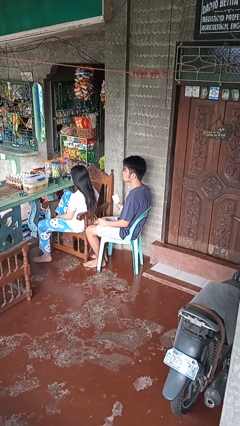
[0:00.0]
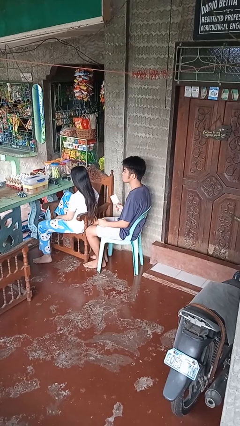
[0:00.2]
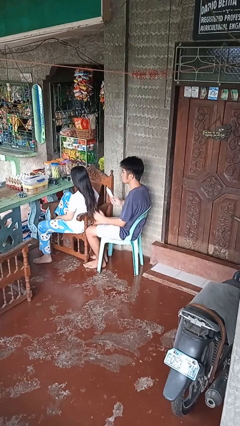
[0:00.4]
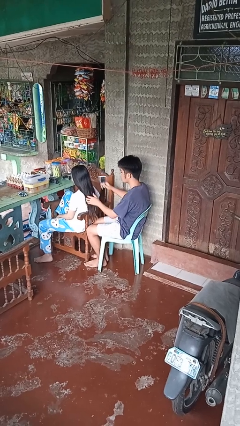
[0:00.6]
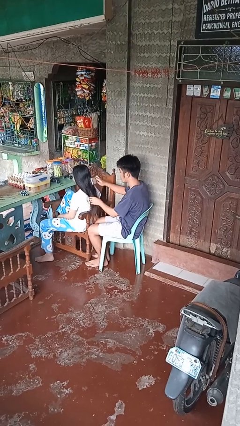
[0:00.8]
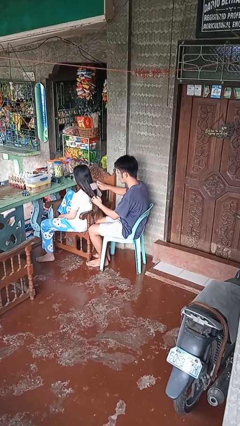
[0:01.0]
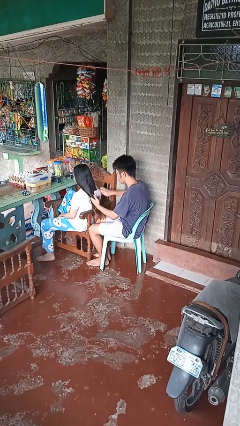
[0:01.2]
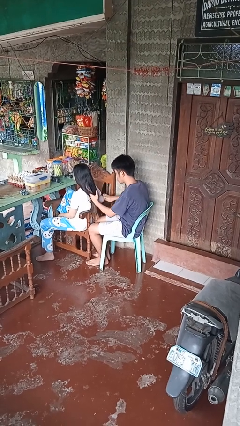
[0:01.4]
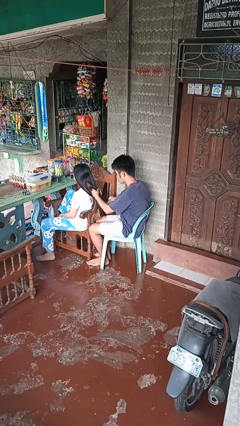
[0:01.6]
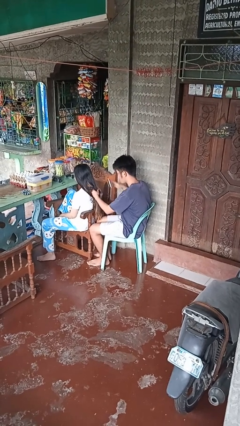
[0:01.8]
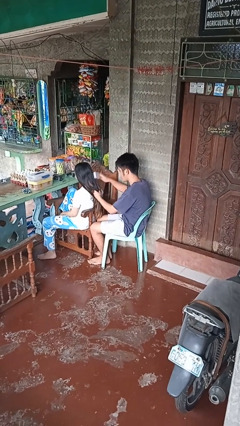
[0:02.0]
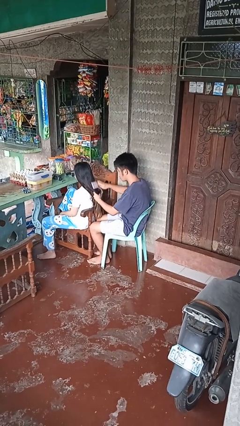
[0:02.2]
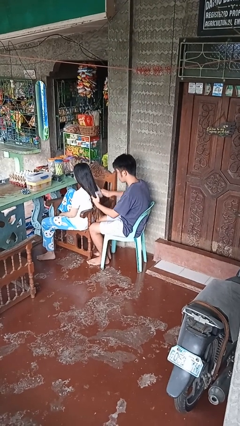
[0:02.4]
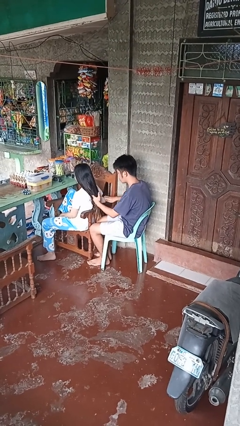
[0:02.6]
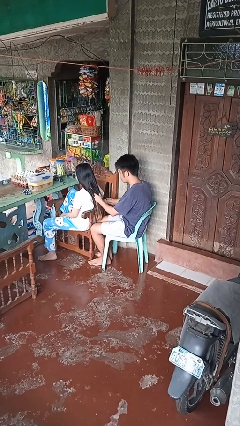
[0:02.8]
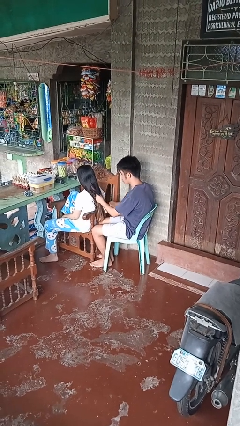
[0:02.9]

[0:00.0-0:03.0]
person brushes hair of person

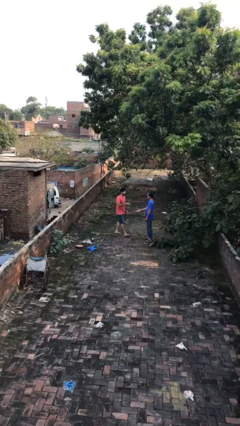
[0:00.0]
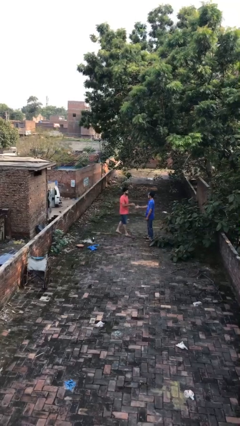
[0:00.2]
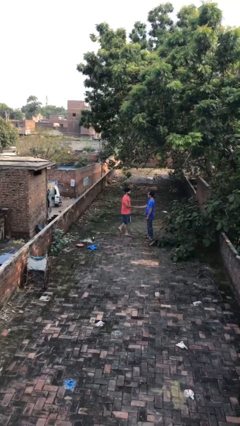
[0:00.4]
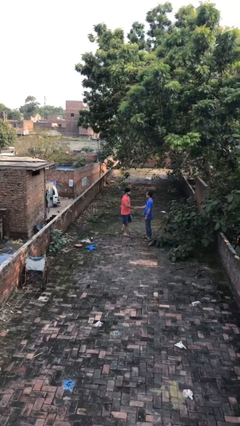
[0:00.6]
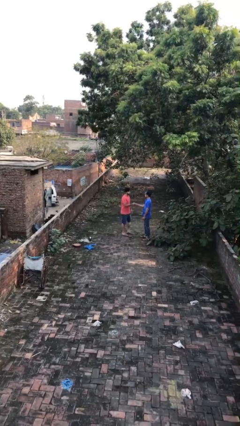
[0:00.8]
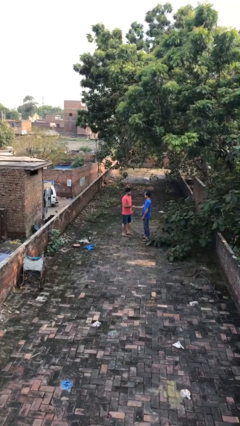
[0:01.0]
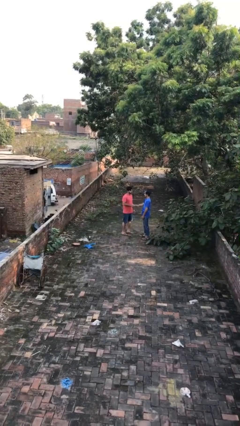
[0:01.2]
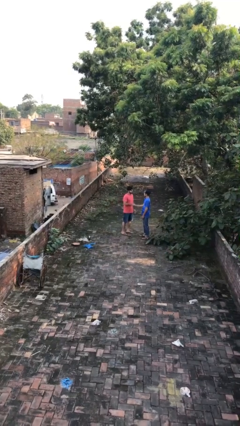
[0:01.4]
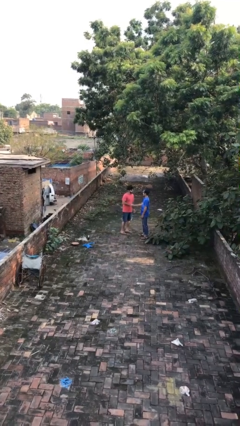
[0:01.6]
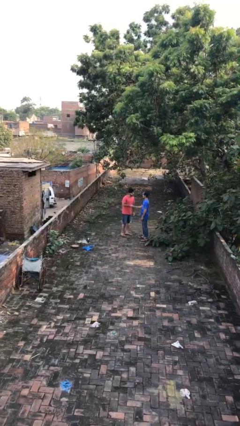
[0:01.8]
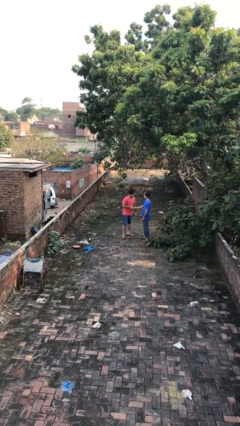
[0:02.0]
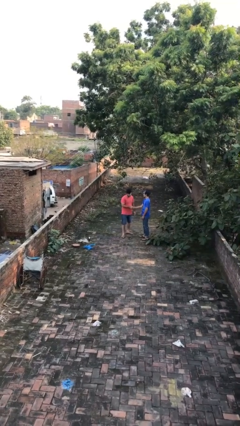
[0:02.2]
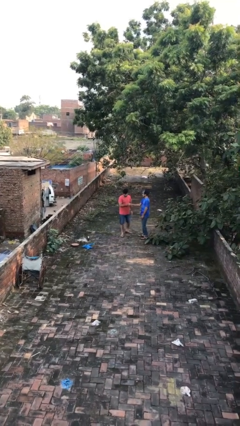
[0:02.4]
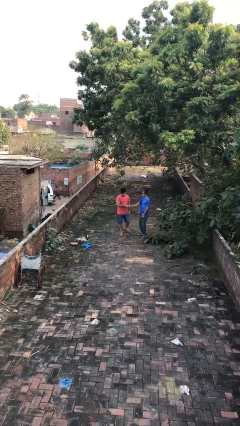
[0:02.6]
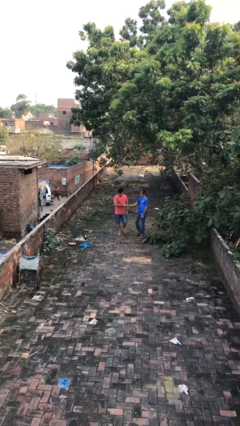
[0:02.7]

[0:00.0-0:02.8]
person shakes hand

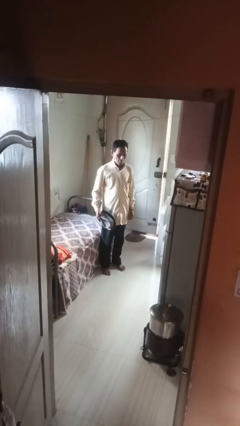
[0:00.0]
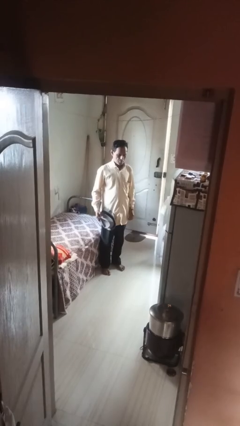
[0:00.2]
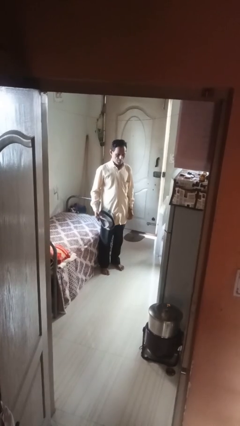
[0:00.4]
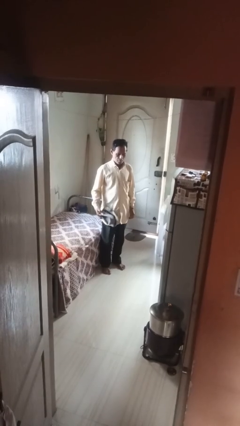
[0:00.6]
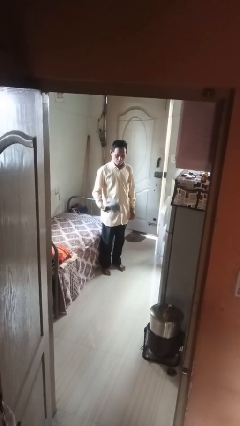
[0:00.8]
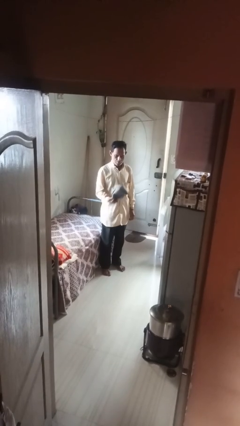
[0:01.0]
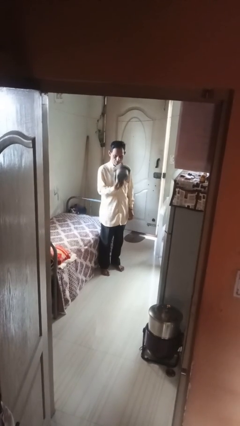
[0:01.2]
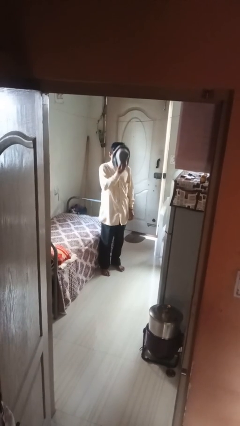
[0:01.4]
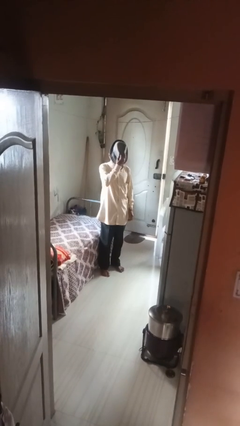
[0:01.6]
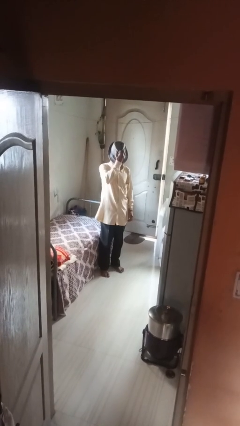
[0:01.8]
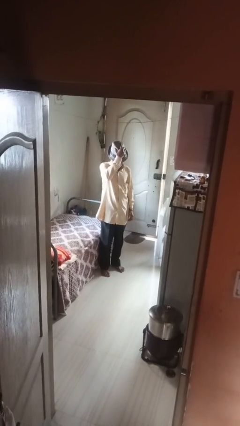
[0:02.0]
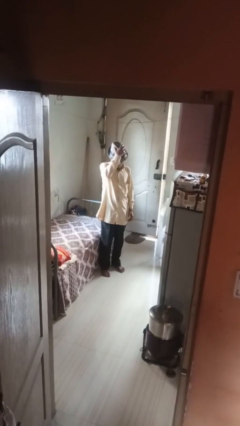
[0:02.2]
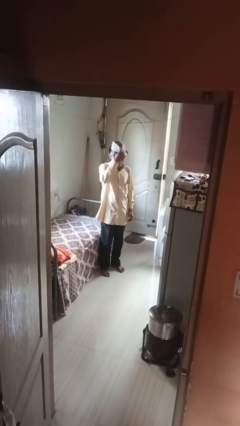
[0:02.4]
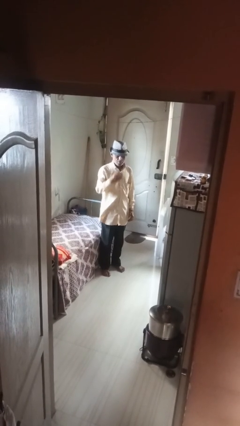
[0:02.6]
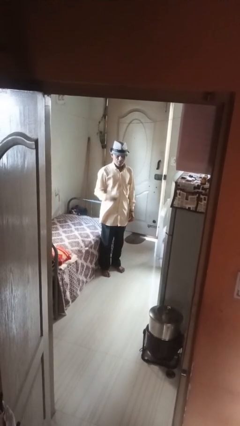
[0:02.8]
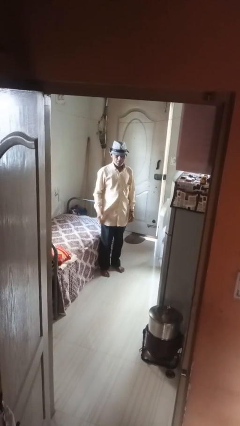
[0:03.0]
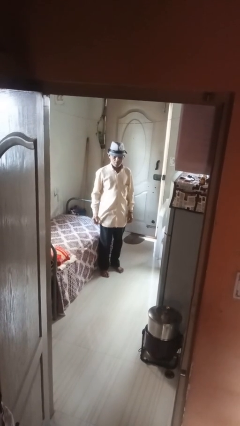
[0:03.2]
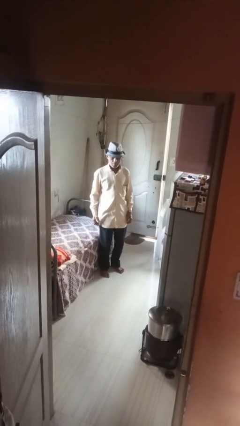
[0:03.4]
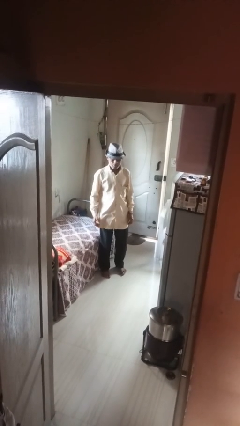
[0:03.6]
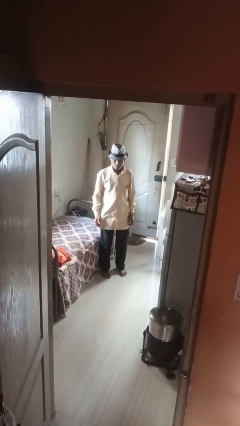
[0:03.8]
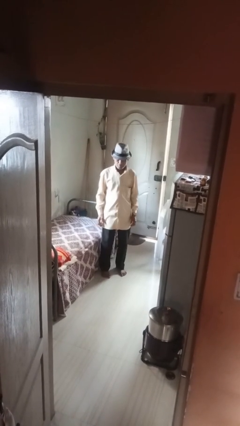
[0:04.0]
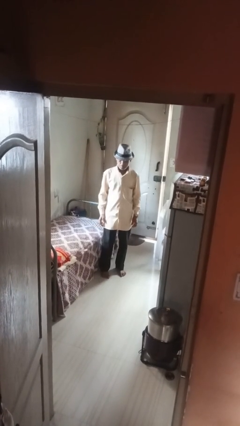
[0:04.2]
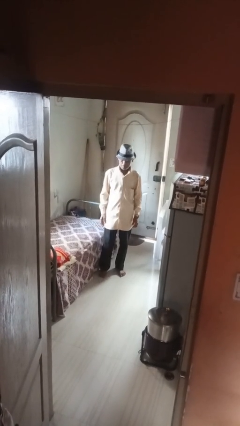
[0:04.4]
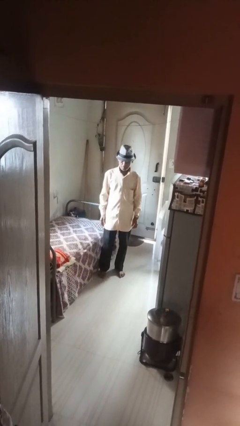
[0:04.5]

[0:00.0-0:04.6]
person puts on hat

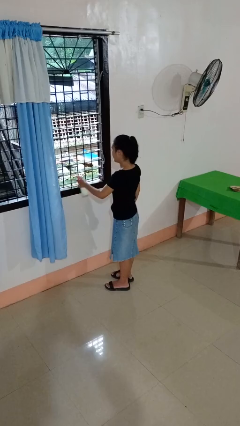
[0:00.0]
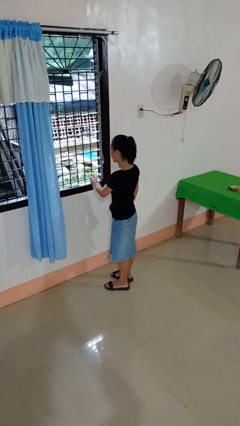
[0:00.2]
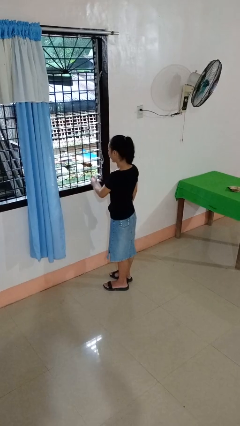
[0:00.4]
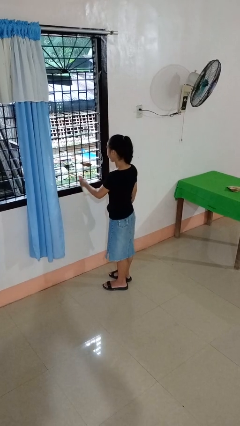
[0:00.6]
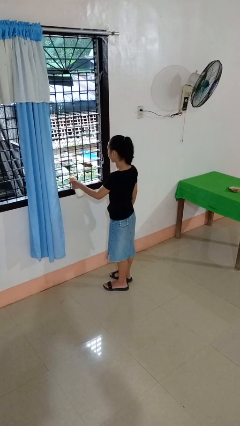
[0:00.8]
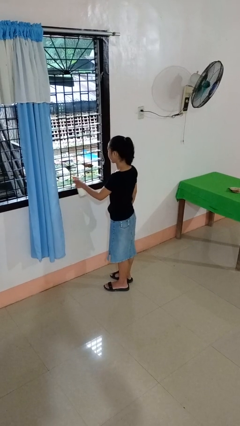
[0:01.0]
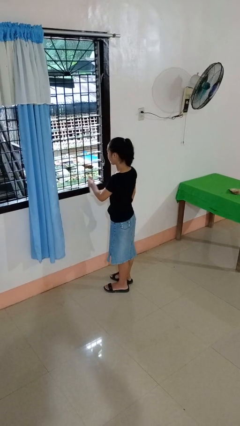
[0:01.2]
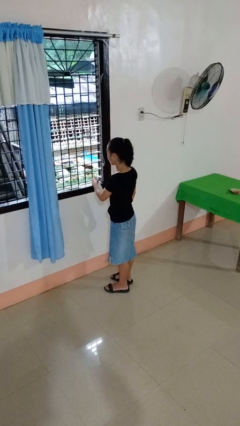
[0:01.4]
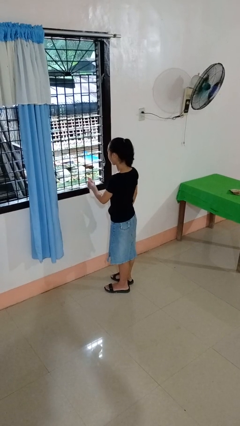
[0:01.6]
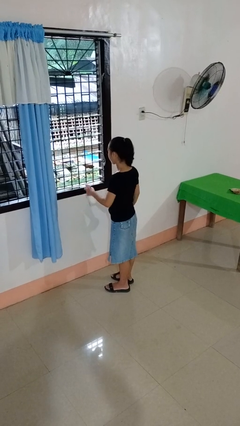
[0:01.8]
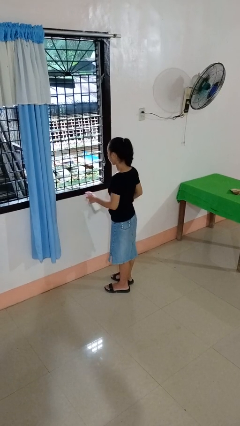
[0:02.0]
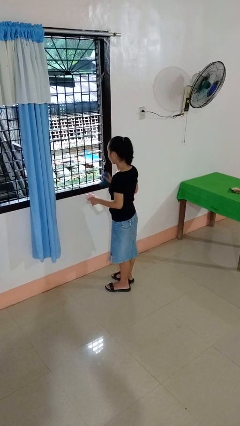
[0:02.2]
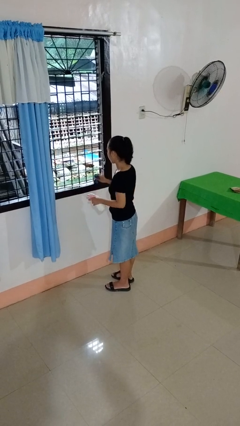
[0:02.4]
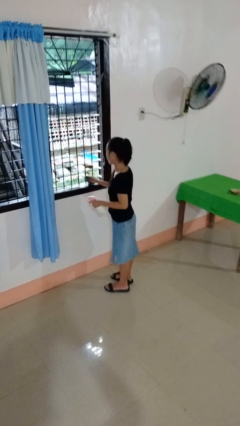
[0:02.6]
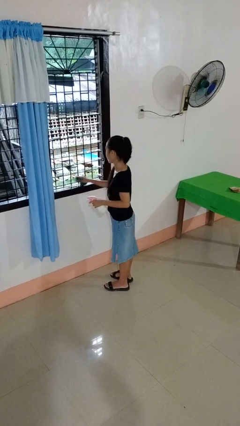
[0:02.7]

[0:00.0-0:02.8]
person sprays from bottle

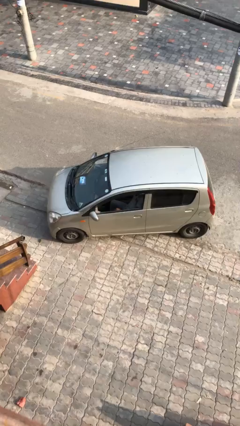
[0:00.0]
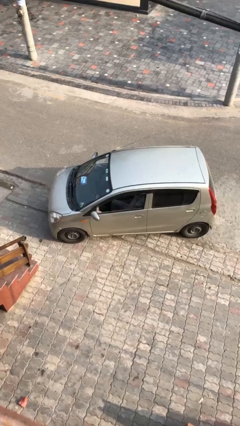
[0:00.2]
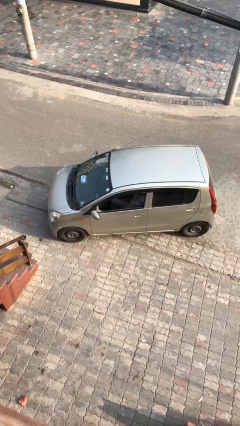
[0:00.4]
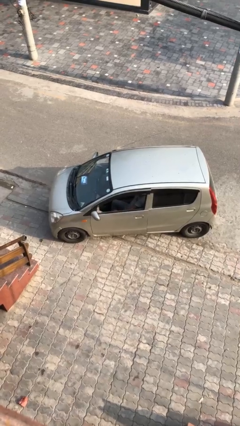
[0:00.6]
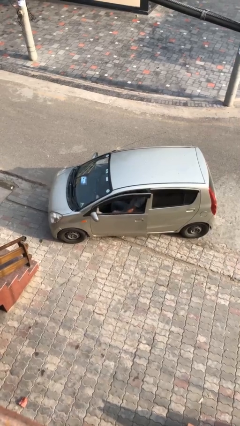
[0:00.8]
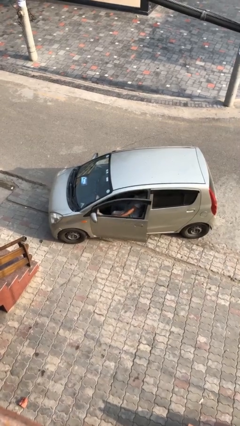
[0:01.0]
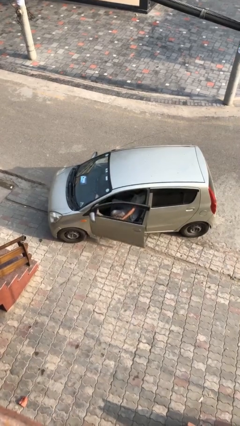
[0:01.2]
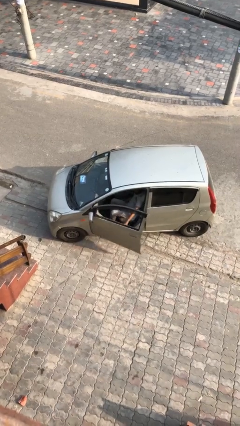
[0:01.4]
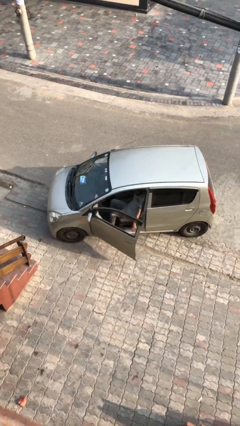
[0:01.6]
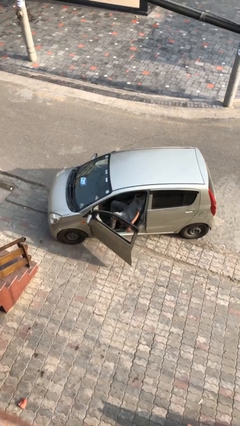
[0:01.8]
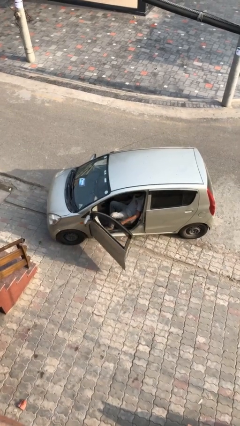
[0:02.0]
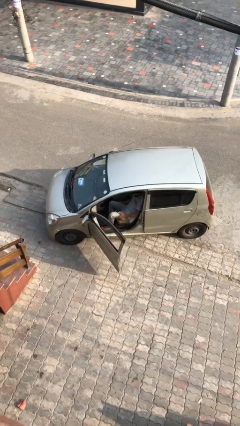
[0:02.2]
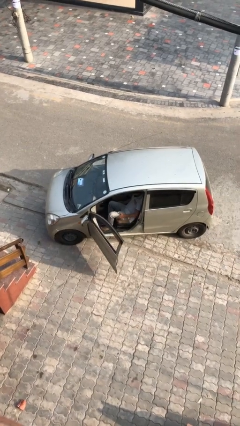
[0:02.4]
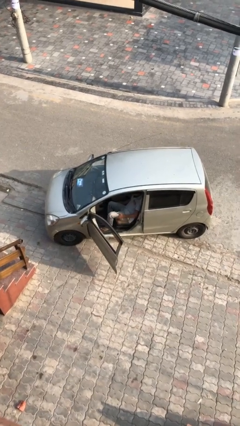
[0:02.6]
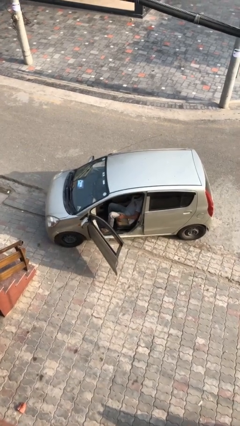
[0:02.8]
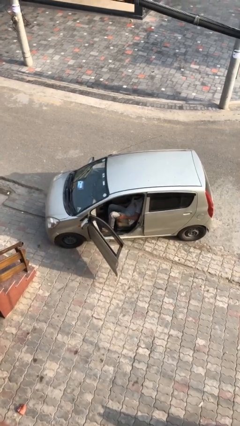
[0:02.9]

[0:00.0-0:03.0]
person opens car door

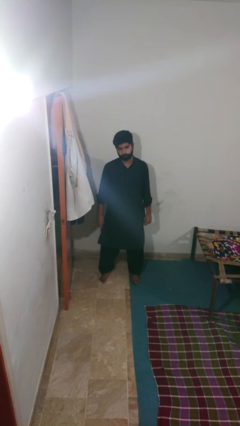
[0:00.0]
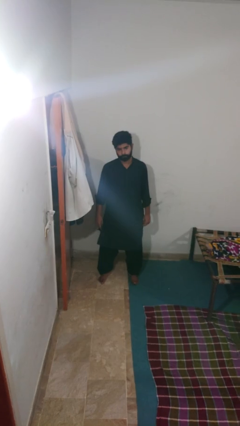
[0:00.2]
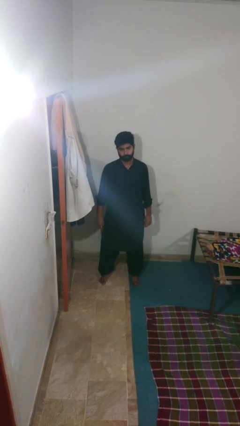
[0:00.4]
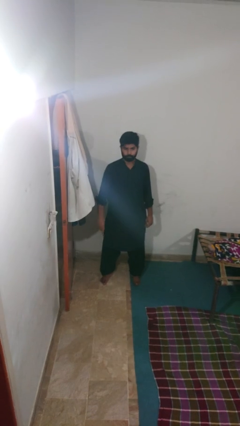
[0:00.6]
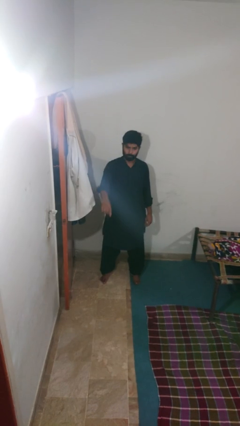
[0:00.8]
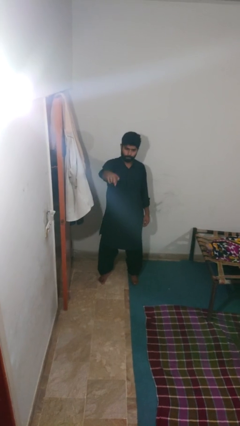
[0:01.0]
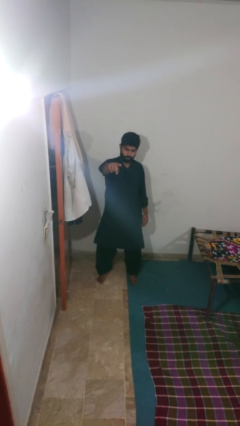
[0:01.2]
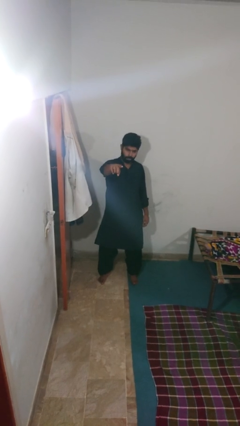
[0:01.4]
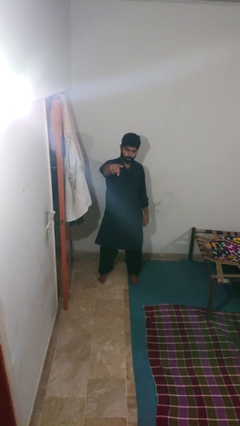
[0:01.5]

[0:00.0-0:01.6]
person points at person
